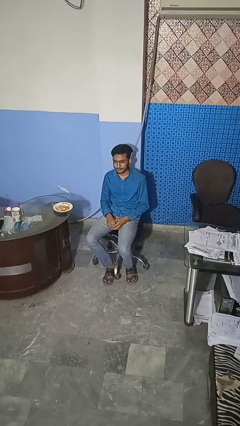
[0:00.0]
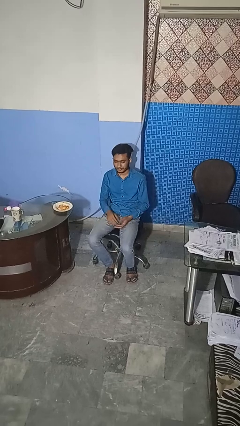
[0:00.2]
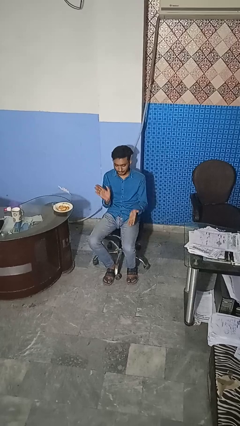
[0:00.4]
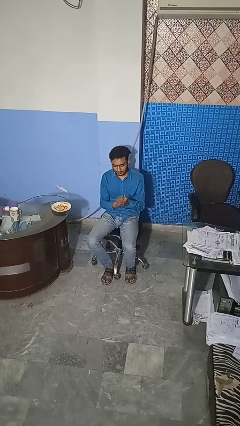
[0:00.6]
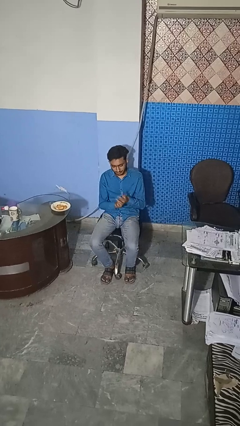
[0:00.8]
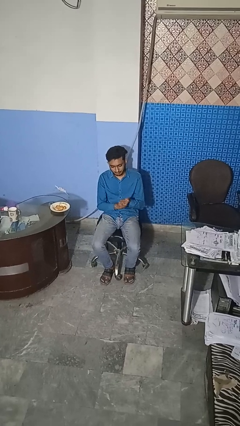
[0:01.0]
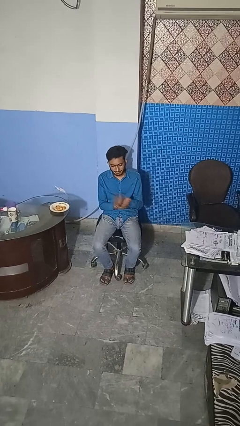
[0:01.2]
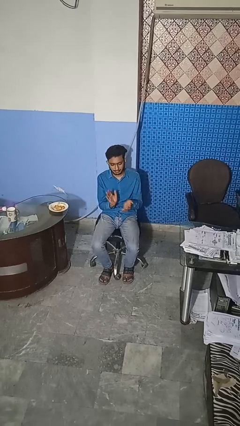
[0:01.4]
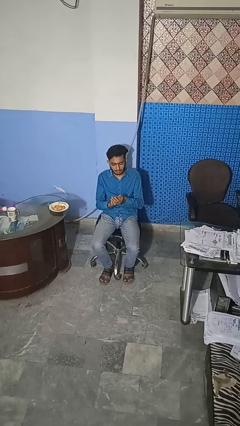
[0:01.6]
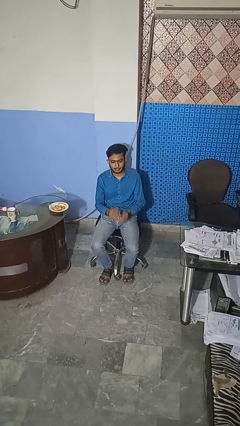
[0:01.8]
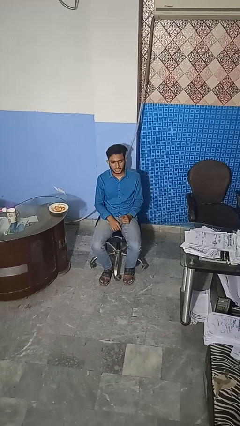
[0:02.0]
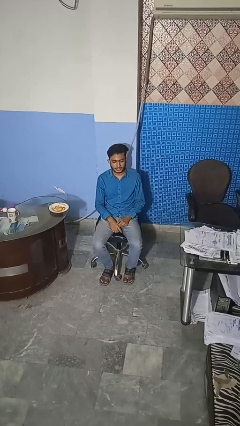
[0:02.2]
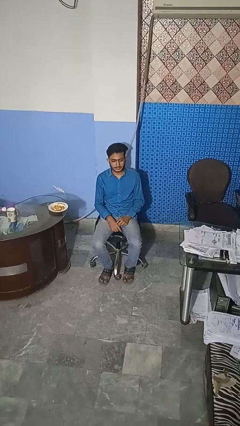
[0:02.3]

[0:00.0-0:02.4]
person claps hands

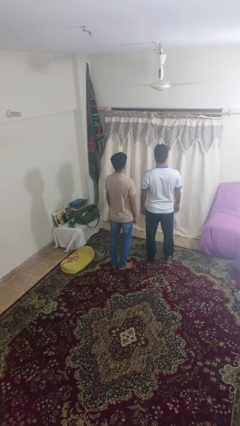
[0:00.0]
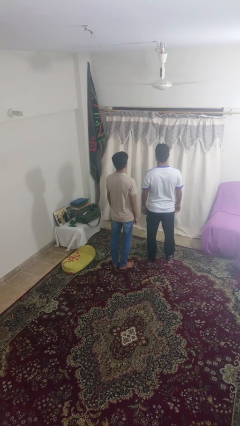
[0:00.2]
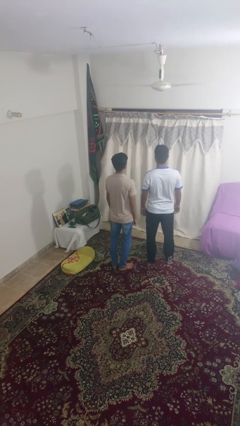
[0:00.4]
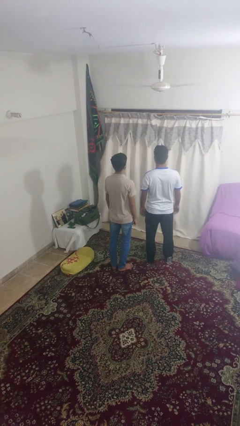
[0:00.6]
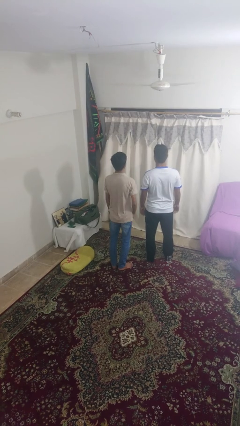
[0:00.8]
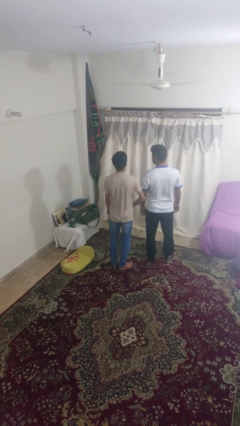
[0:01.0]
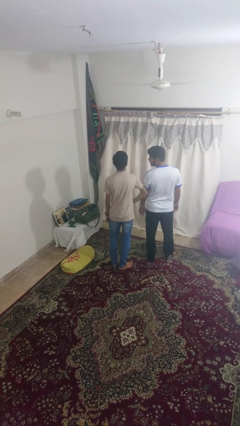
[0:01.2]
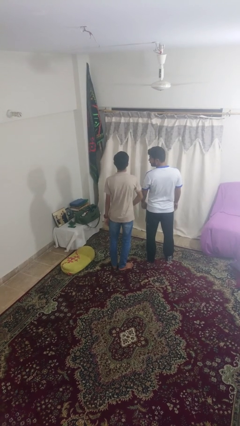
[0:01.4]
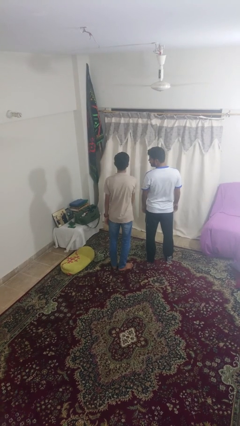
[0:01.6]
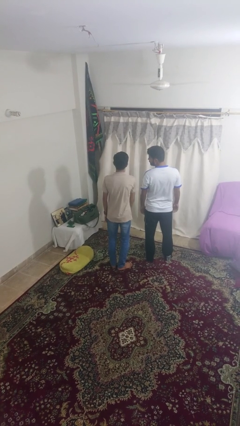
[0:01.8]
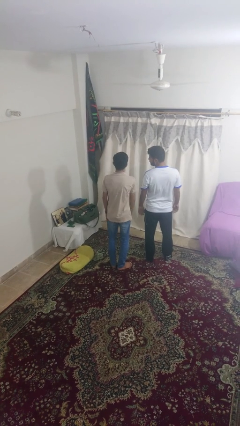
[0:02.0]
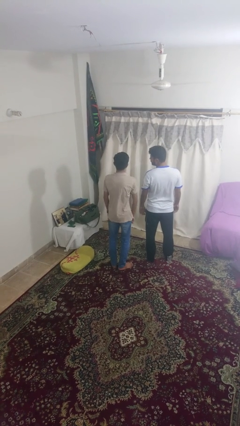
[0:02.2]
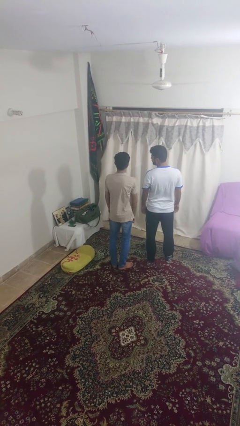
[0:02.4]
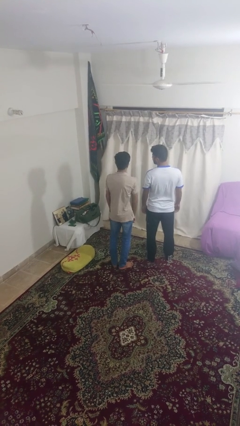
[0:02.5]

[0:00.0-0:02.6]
person nudges person with elbow

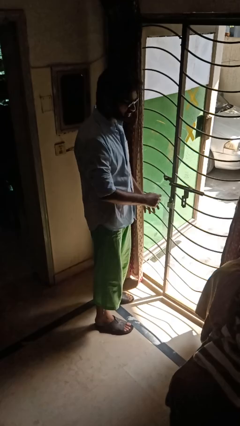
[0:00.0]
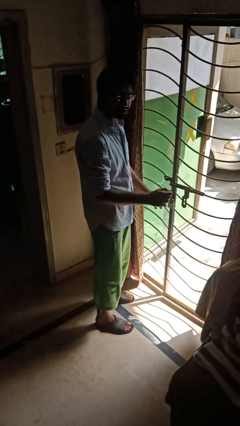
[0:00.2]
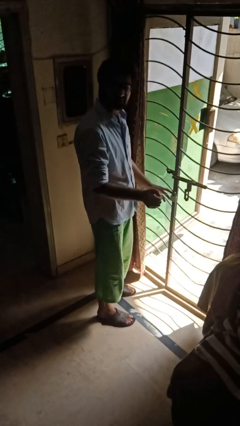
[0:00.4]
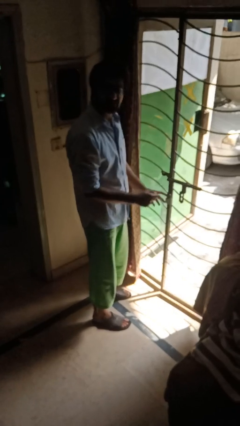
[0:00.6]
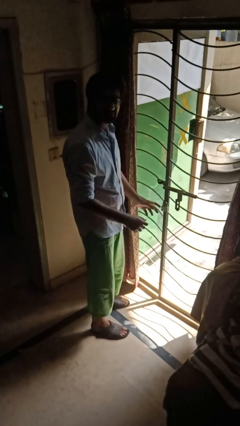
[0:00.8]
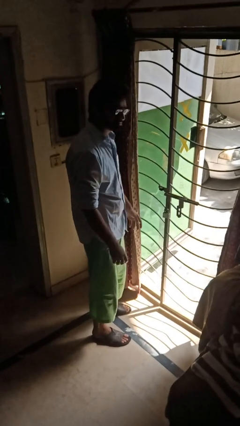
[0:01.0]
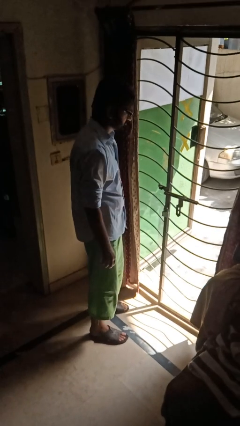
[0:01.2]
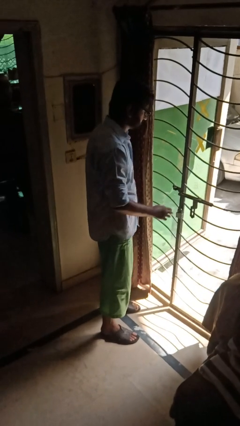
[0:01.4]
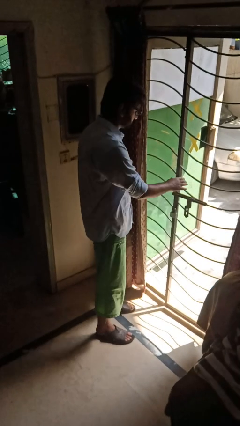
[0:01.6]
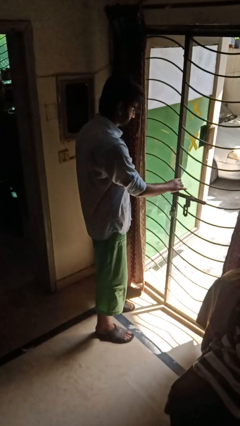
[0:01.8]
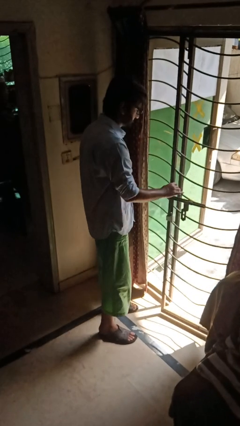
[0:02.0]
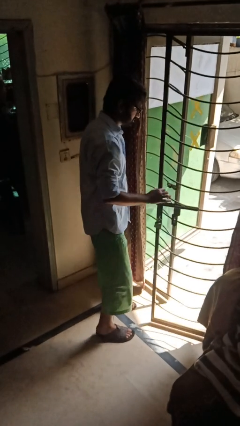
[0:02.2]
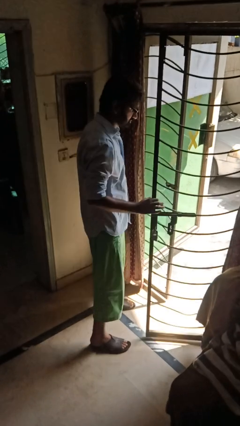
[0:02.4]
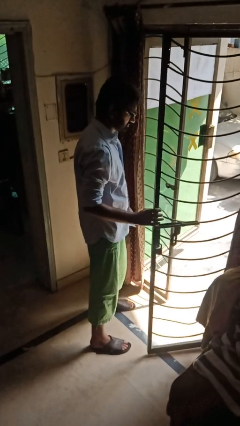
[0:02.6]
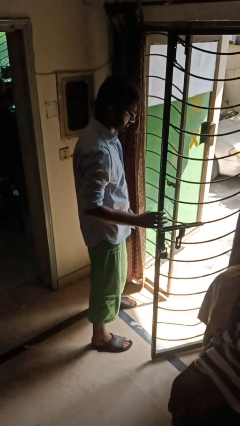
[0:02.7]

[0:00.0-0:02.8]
person opens gate

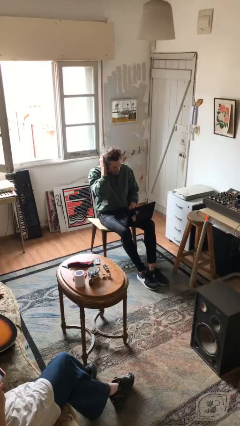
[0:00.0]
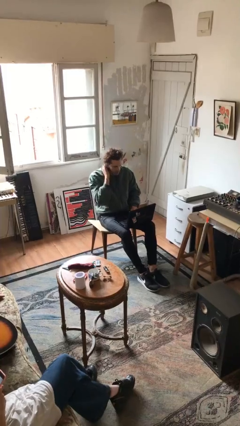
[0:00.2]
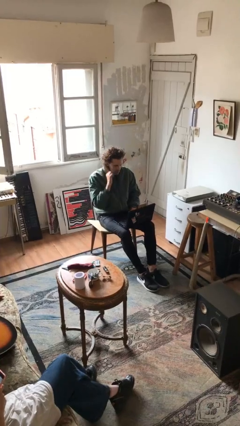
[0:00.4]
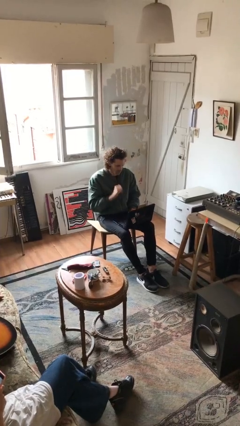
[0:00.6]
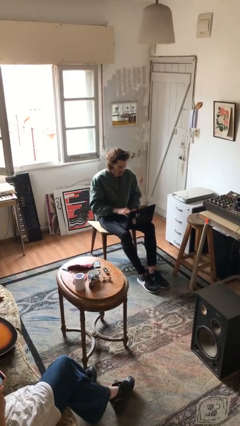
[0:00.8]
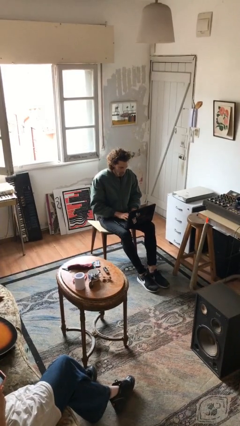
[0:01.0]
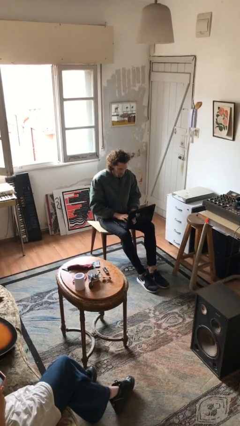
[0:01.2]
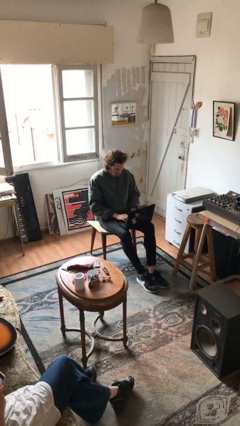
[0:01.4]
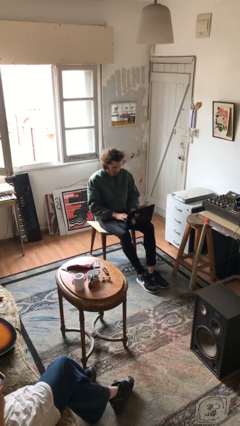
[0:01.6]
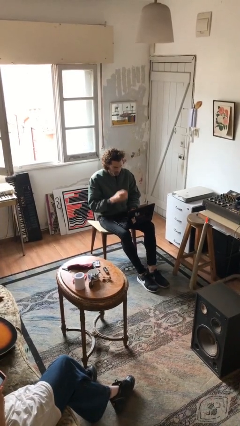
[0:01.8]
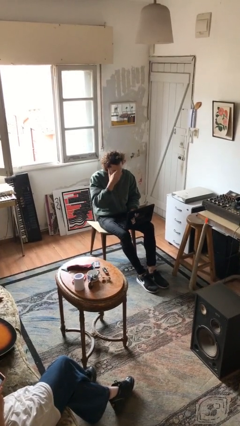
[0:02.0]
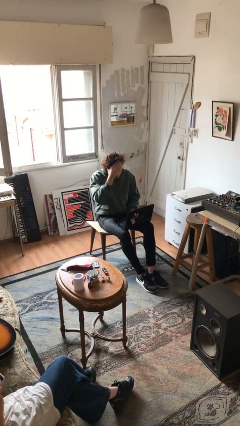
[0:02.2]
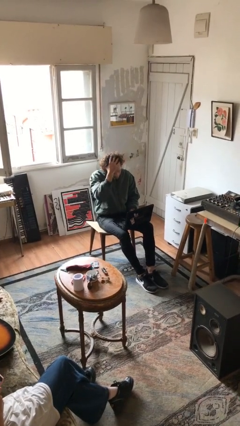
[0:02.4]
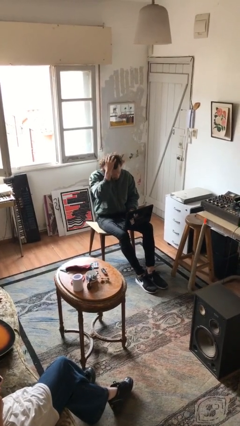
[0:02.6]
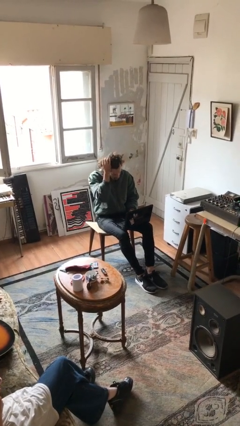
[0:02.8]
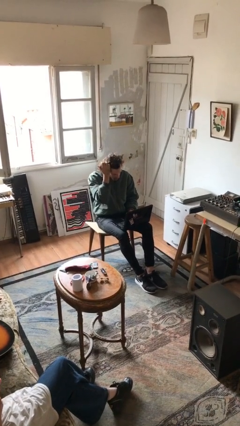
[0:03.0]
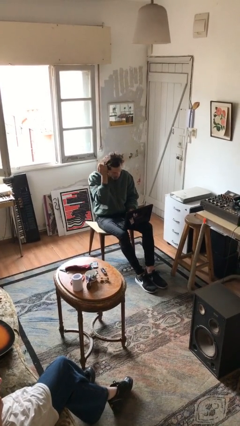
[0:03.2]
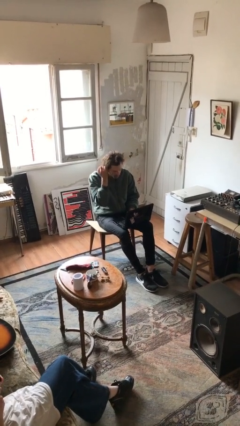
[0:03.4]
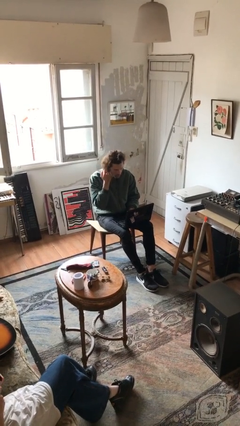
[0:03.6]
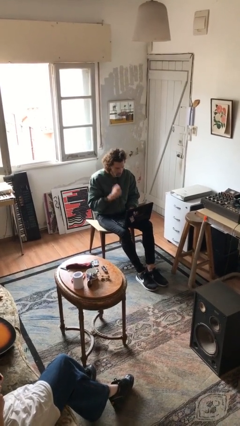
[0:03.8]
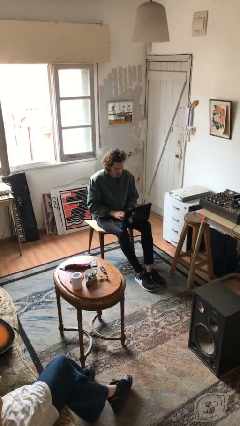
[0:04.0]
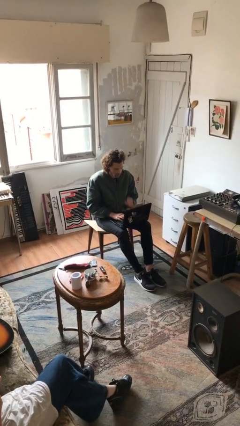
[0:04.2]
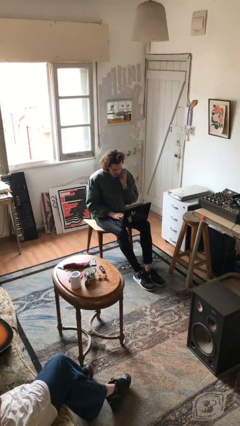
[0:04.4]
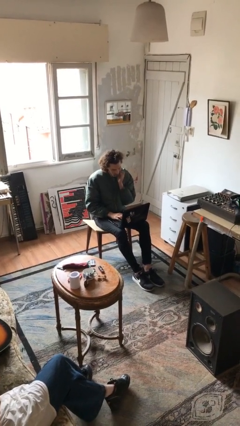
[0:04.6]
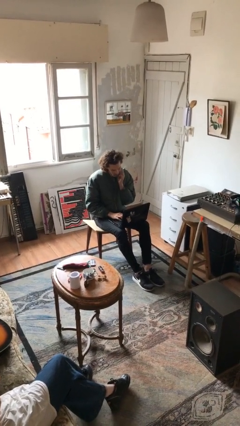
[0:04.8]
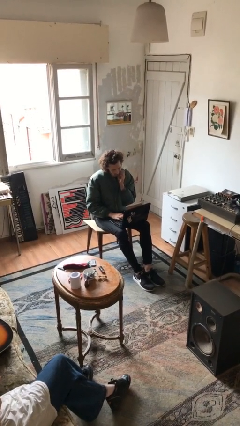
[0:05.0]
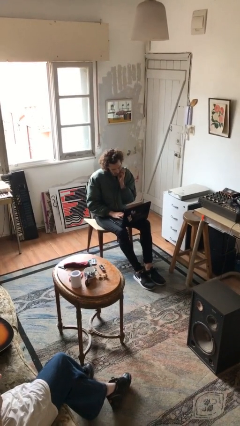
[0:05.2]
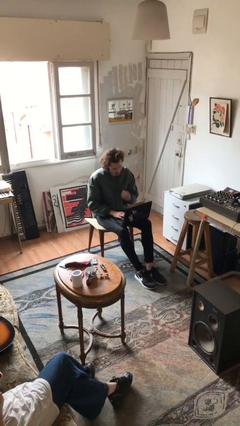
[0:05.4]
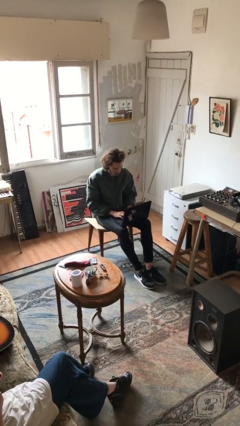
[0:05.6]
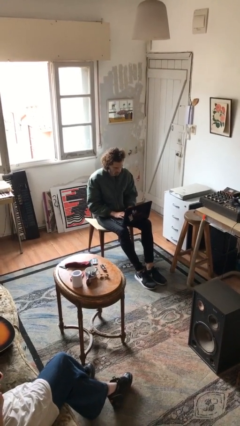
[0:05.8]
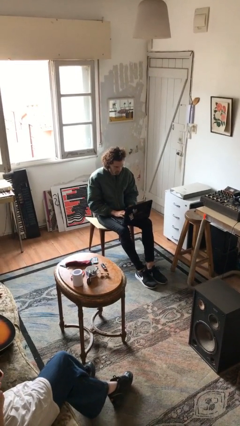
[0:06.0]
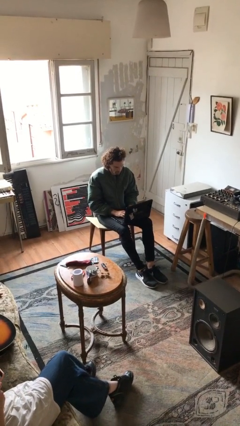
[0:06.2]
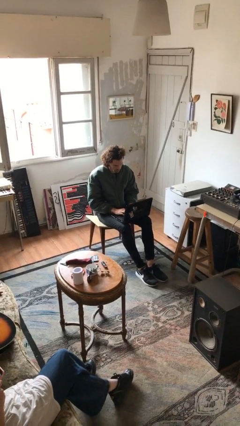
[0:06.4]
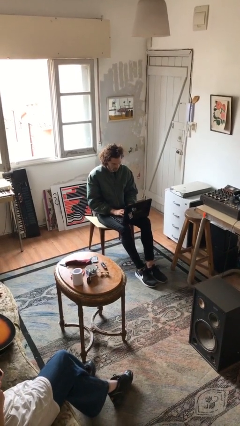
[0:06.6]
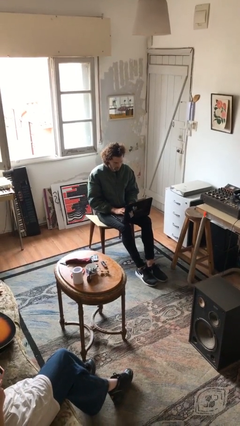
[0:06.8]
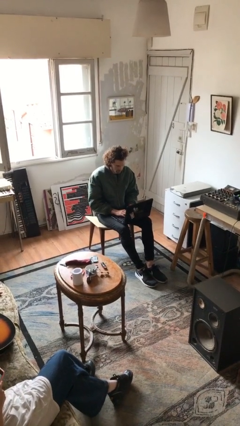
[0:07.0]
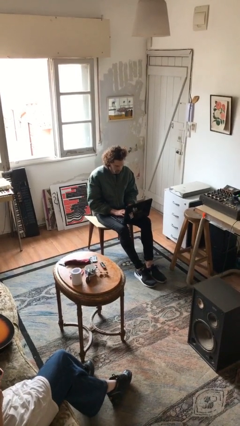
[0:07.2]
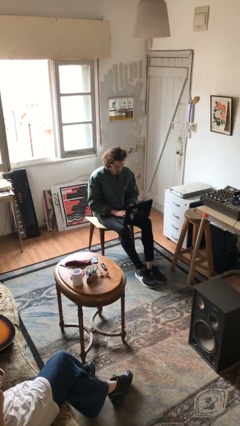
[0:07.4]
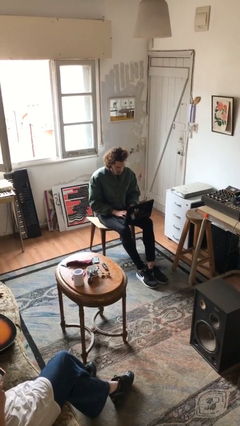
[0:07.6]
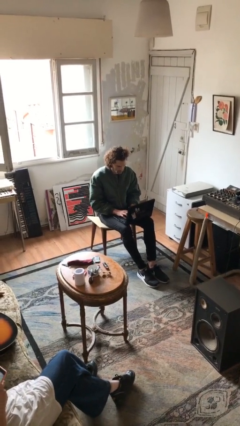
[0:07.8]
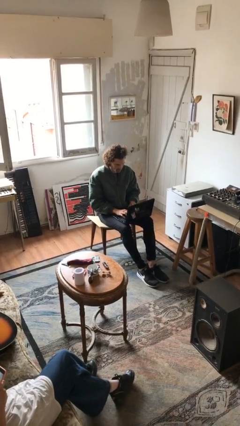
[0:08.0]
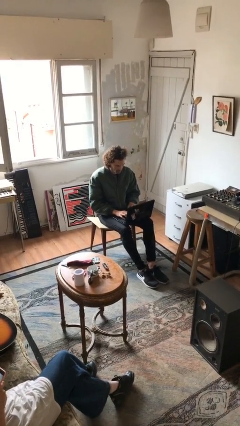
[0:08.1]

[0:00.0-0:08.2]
person interacts with laptop

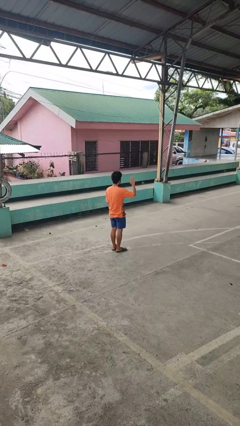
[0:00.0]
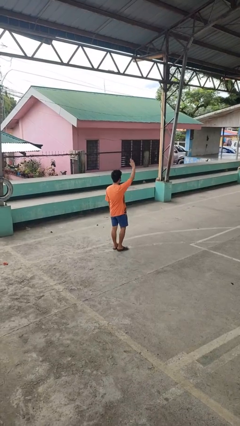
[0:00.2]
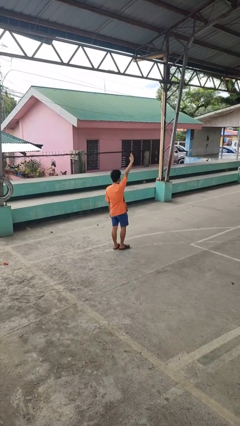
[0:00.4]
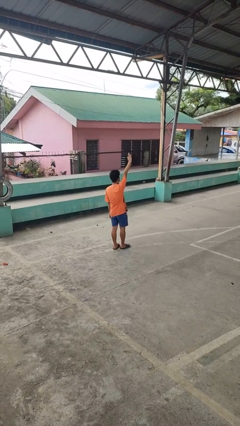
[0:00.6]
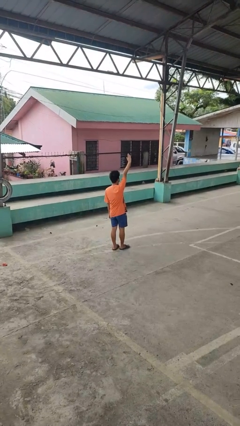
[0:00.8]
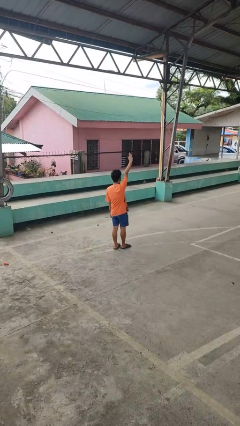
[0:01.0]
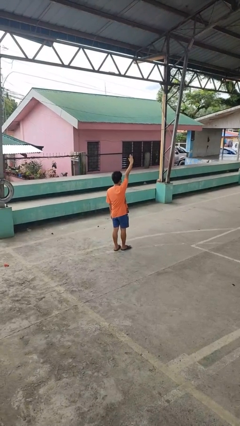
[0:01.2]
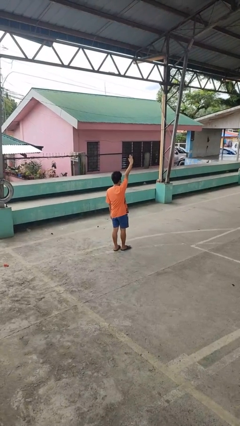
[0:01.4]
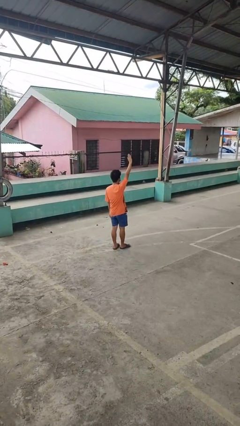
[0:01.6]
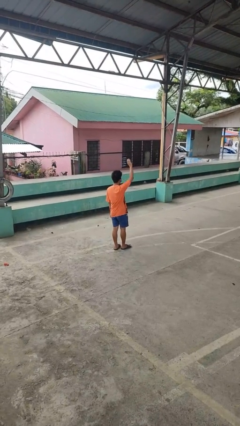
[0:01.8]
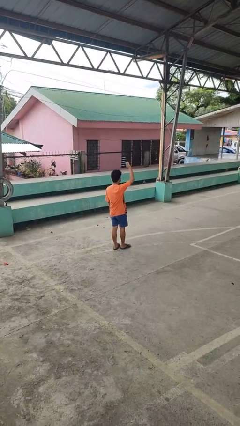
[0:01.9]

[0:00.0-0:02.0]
person gestures raise hand
